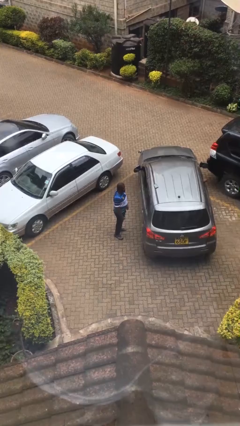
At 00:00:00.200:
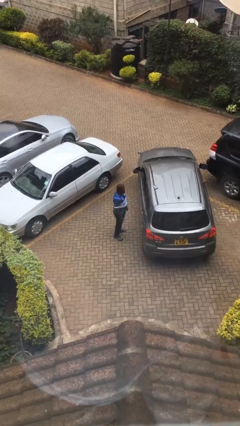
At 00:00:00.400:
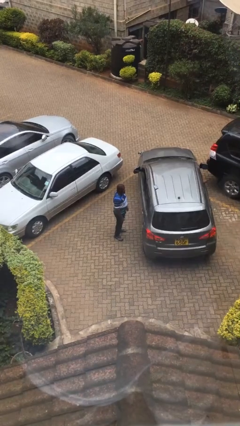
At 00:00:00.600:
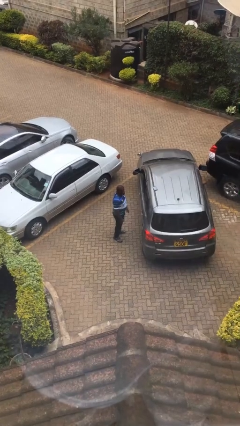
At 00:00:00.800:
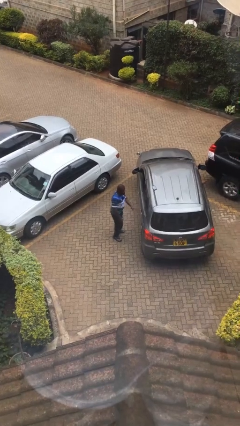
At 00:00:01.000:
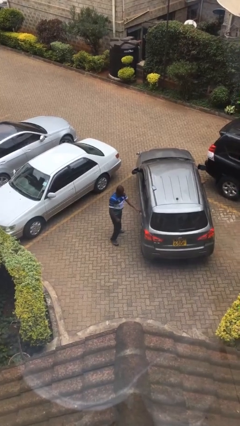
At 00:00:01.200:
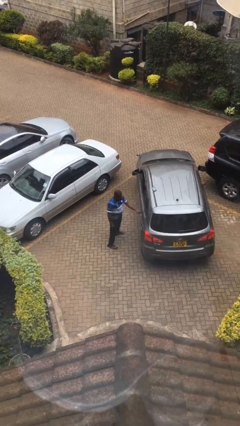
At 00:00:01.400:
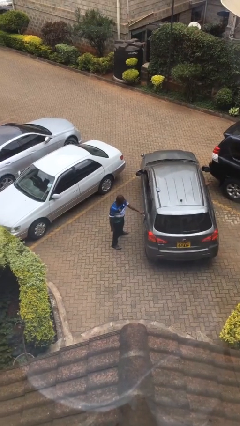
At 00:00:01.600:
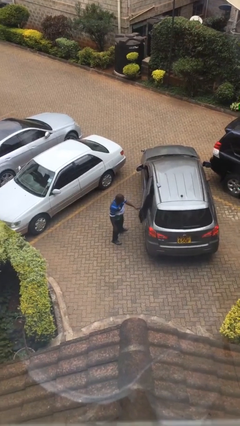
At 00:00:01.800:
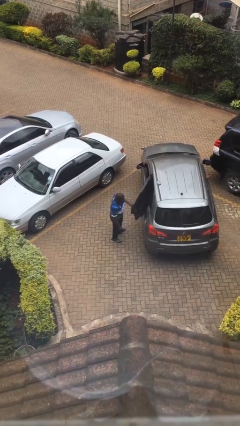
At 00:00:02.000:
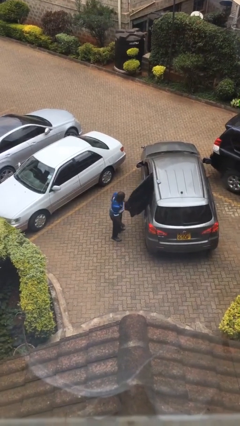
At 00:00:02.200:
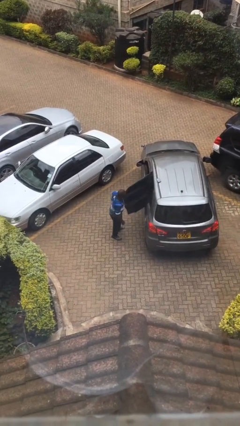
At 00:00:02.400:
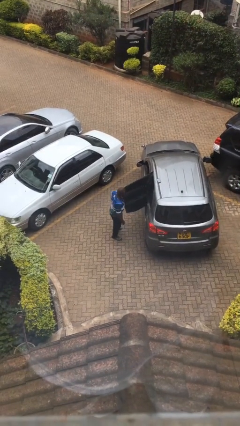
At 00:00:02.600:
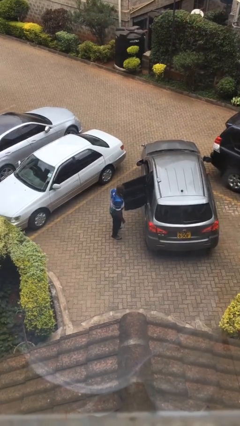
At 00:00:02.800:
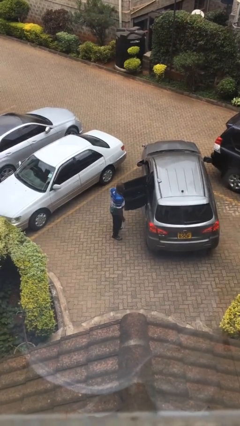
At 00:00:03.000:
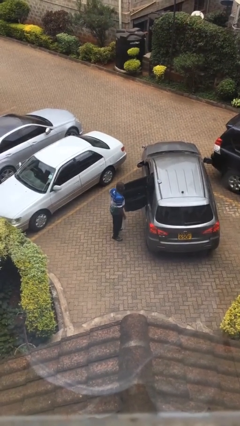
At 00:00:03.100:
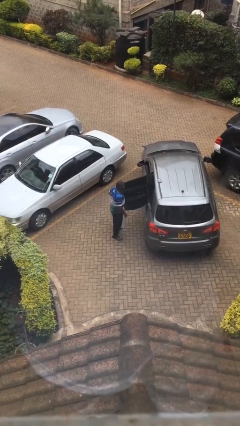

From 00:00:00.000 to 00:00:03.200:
person opens car door

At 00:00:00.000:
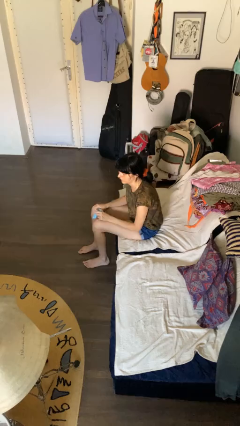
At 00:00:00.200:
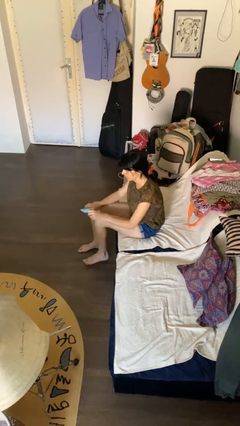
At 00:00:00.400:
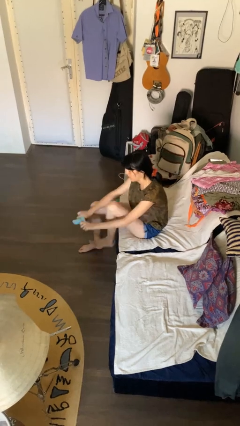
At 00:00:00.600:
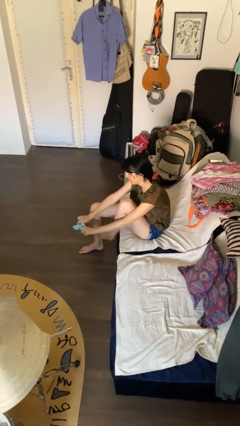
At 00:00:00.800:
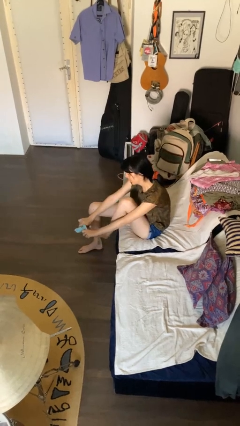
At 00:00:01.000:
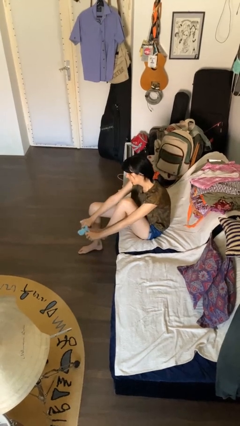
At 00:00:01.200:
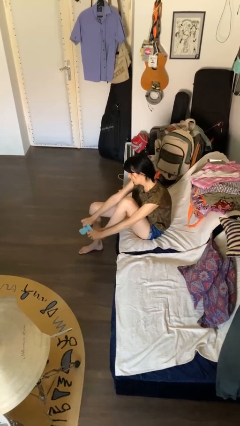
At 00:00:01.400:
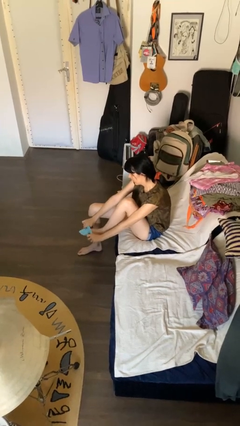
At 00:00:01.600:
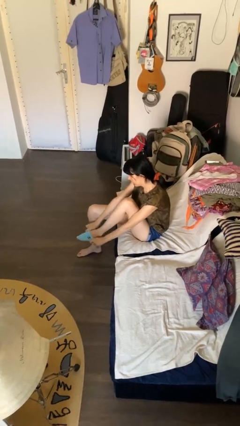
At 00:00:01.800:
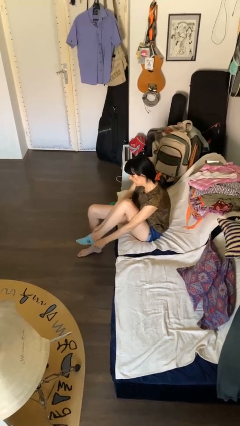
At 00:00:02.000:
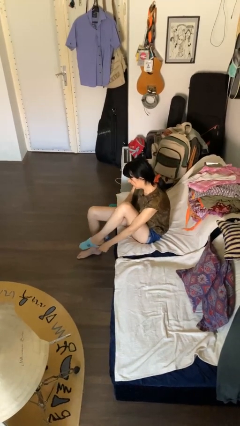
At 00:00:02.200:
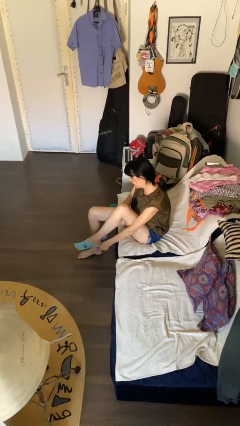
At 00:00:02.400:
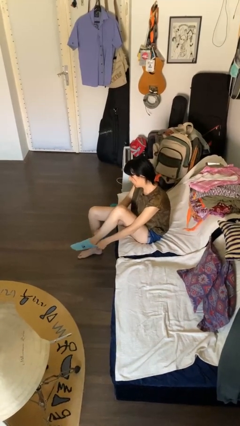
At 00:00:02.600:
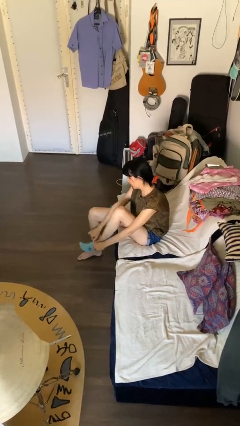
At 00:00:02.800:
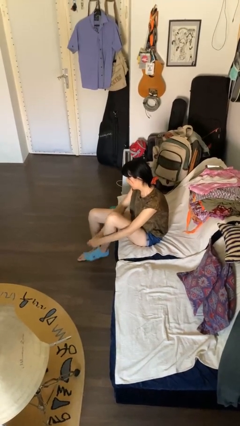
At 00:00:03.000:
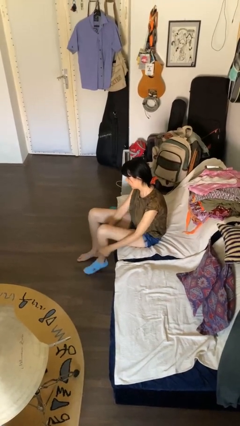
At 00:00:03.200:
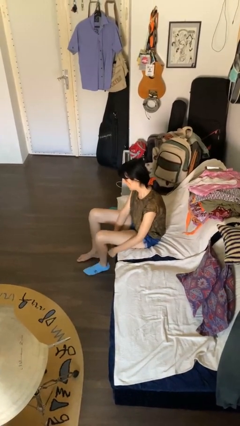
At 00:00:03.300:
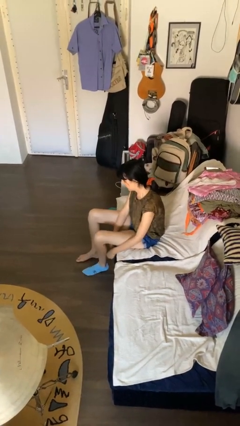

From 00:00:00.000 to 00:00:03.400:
person puts on socks

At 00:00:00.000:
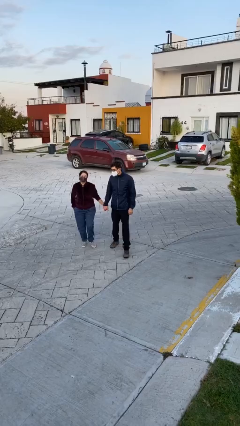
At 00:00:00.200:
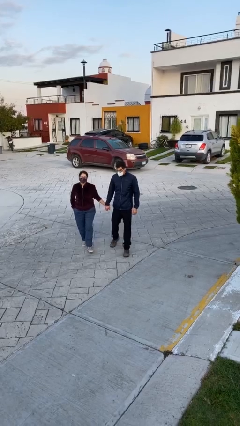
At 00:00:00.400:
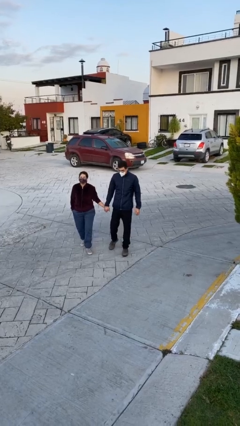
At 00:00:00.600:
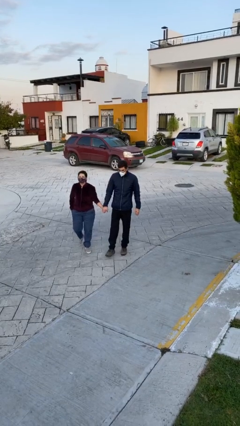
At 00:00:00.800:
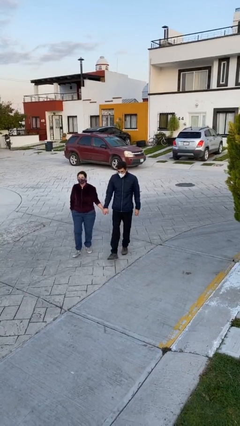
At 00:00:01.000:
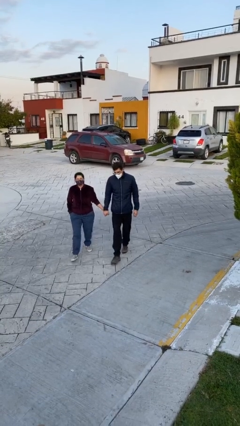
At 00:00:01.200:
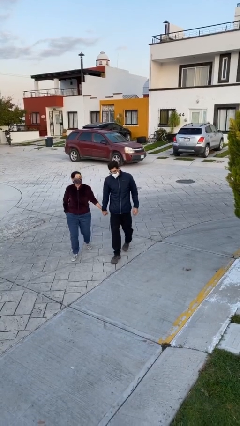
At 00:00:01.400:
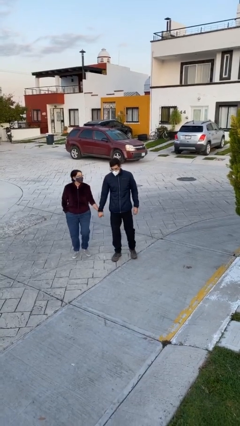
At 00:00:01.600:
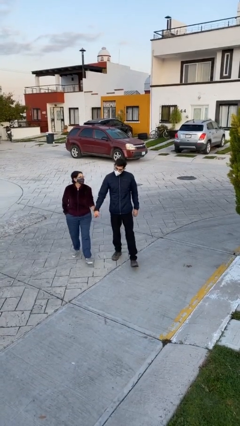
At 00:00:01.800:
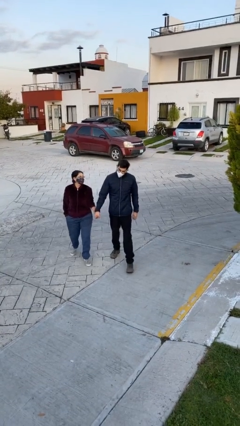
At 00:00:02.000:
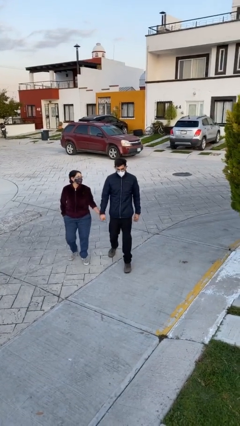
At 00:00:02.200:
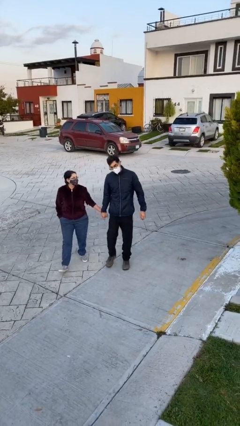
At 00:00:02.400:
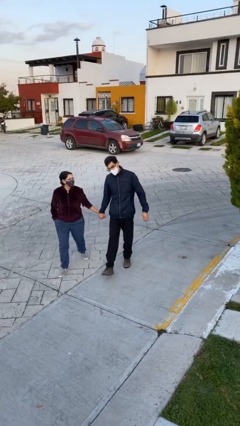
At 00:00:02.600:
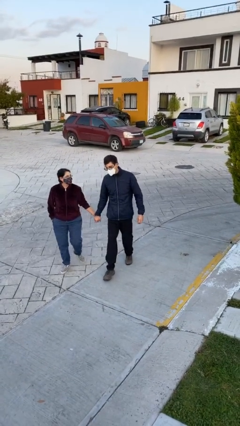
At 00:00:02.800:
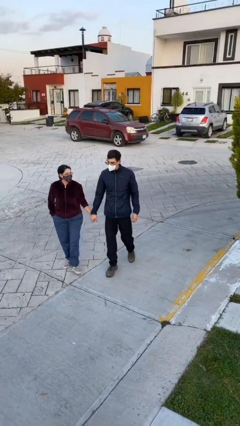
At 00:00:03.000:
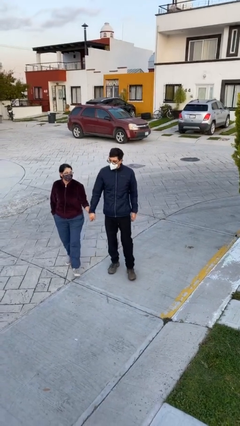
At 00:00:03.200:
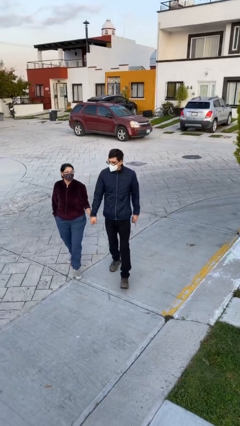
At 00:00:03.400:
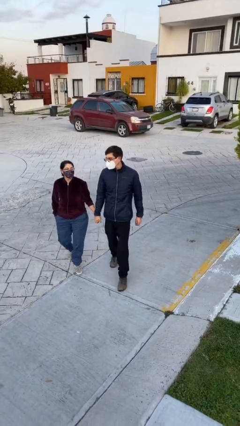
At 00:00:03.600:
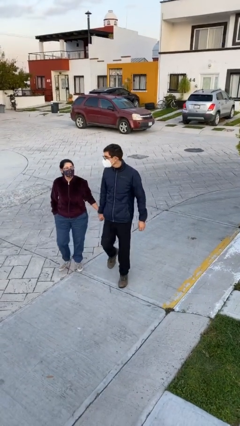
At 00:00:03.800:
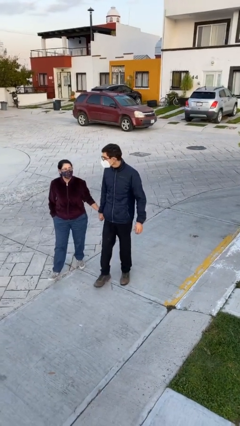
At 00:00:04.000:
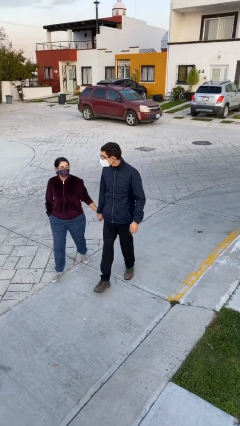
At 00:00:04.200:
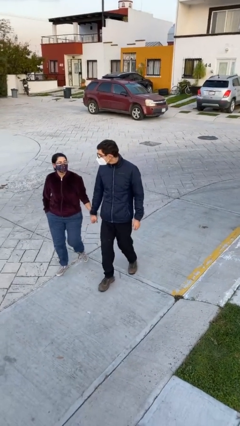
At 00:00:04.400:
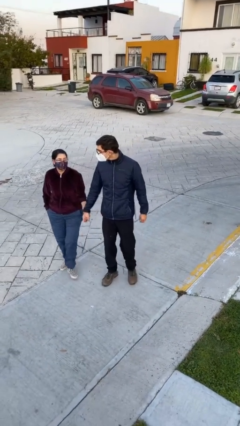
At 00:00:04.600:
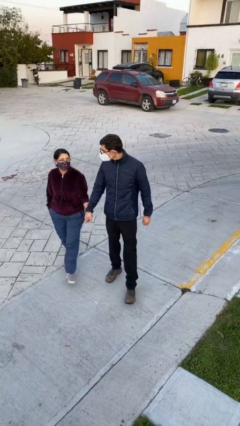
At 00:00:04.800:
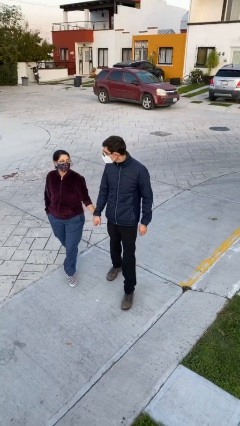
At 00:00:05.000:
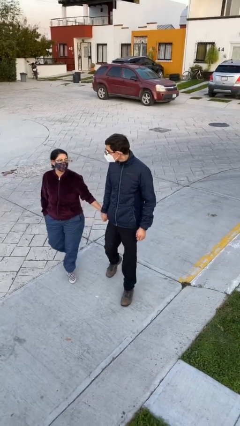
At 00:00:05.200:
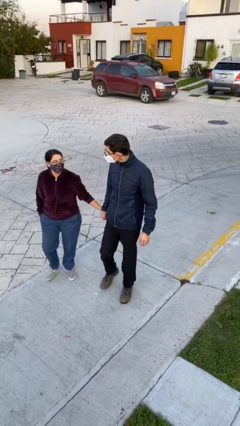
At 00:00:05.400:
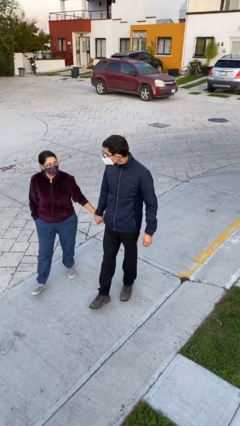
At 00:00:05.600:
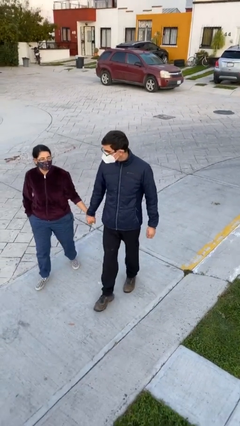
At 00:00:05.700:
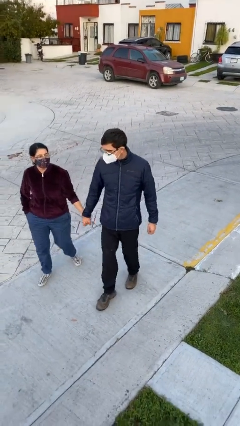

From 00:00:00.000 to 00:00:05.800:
person holds hand

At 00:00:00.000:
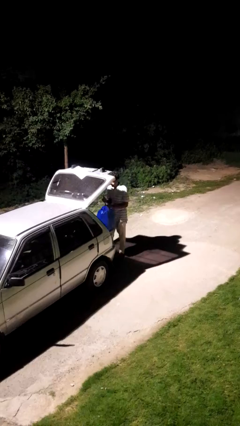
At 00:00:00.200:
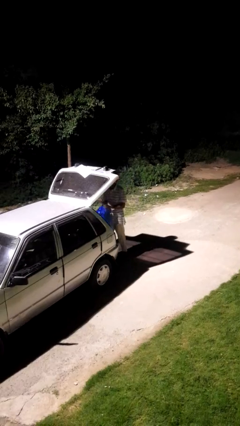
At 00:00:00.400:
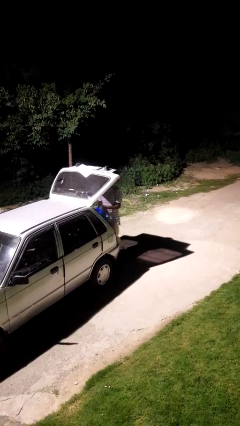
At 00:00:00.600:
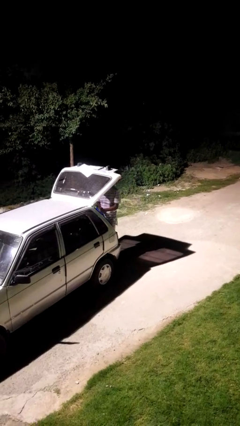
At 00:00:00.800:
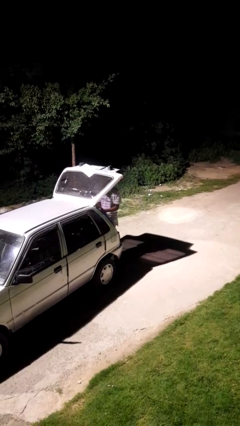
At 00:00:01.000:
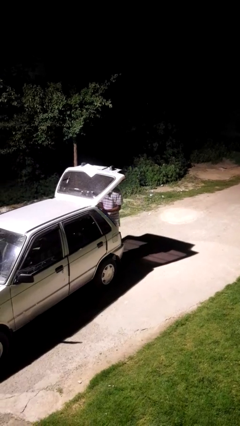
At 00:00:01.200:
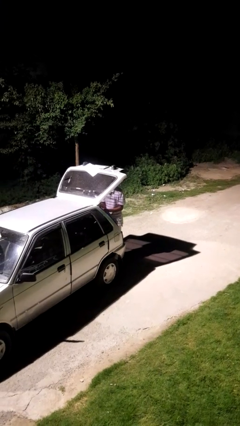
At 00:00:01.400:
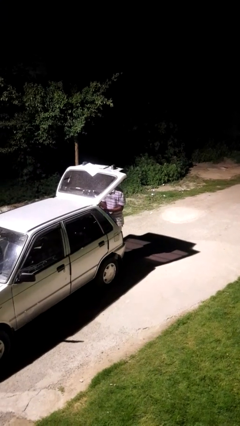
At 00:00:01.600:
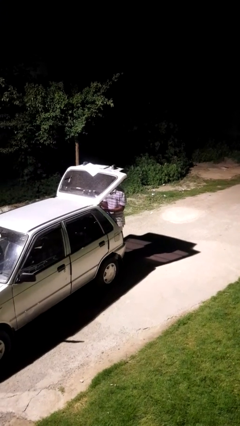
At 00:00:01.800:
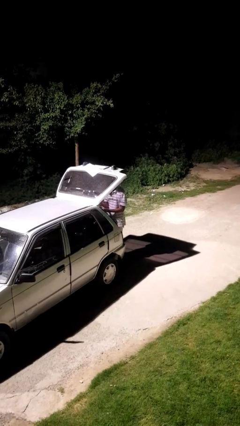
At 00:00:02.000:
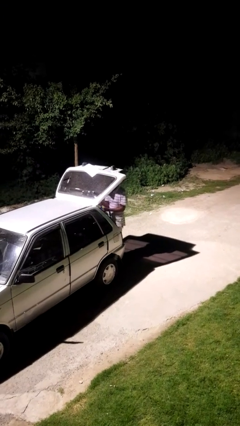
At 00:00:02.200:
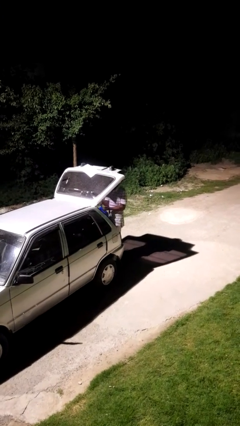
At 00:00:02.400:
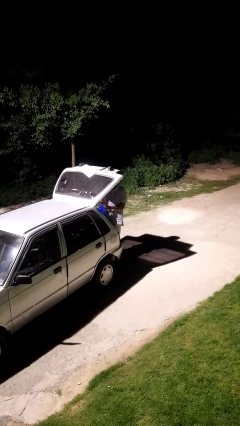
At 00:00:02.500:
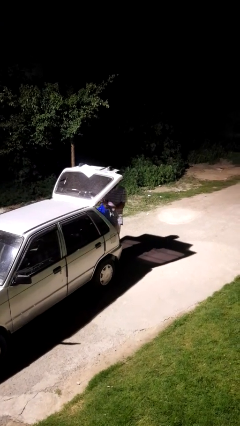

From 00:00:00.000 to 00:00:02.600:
person loads car

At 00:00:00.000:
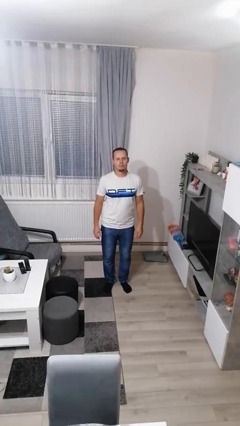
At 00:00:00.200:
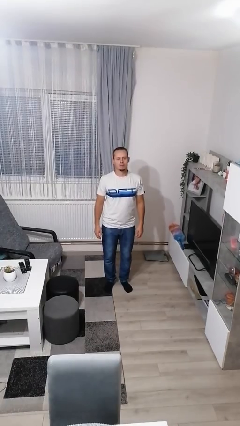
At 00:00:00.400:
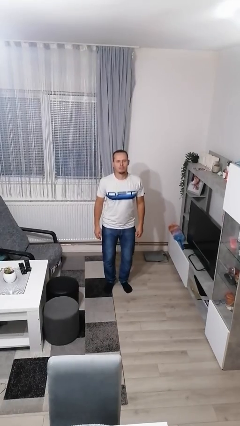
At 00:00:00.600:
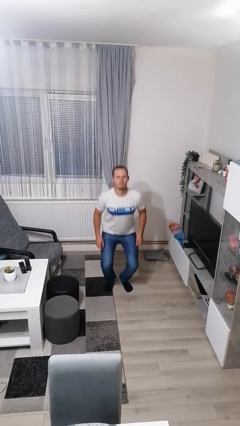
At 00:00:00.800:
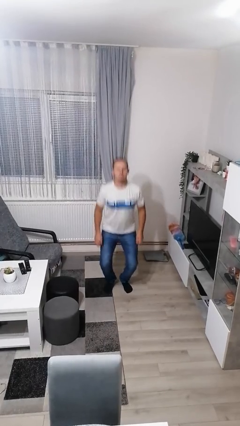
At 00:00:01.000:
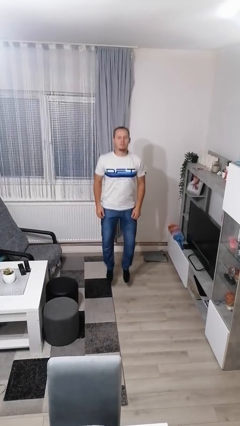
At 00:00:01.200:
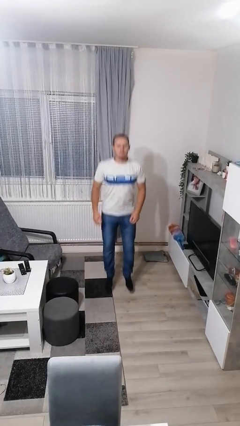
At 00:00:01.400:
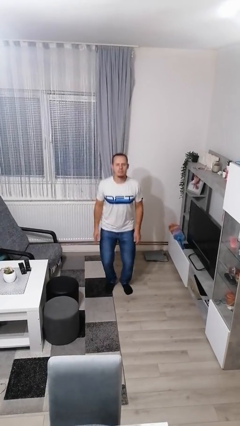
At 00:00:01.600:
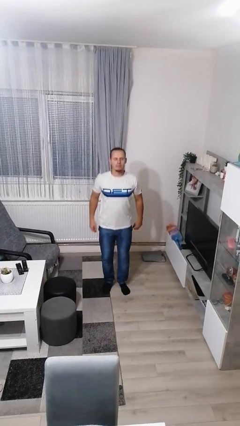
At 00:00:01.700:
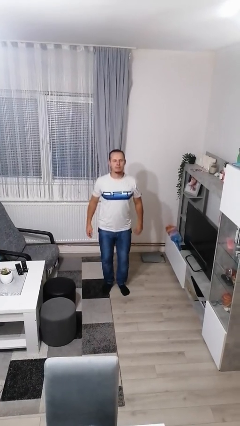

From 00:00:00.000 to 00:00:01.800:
person jumps
